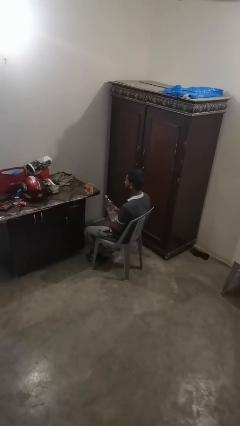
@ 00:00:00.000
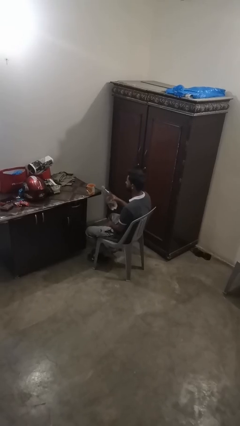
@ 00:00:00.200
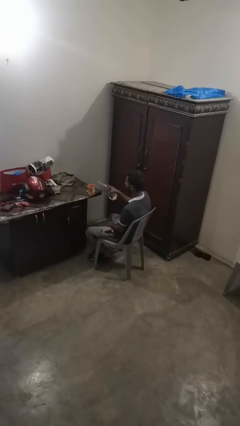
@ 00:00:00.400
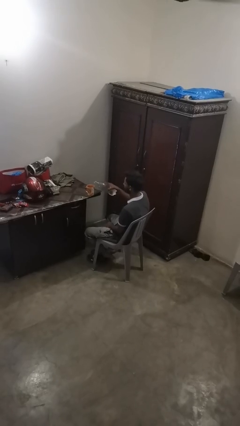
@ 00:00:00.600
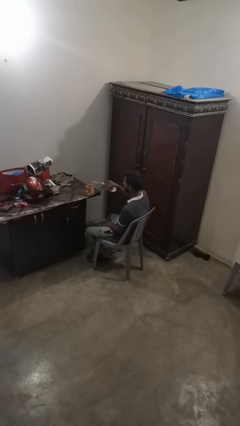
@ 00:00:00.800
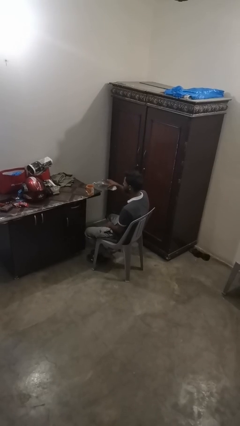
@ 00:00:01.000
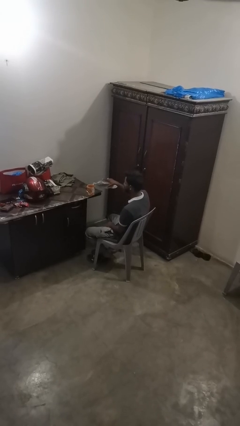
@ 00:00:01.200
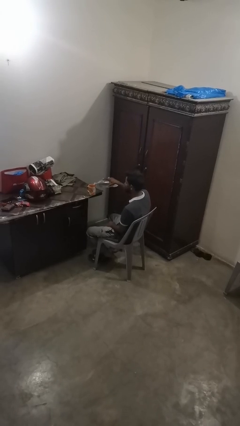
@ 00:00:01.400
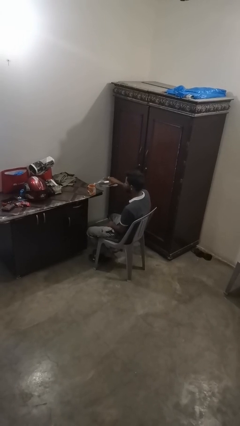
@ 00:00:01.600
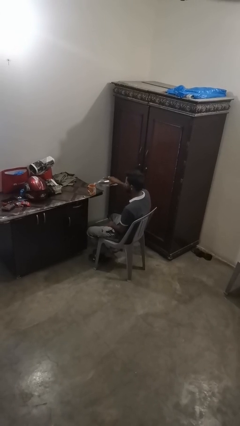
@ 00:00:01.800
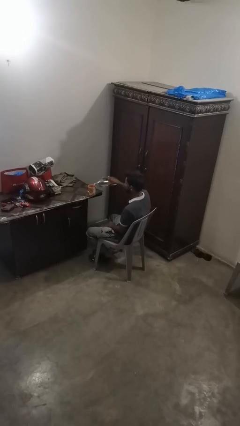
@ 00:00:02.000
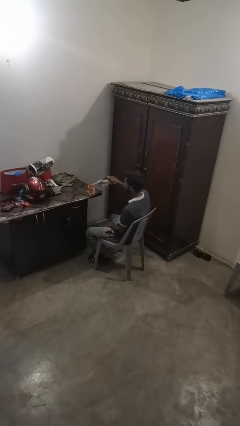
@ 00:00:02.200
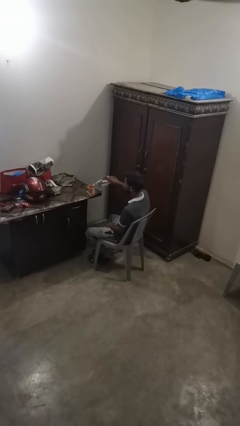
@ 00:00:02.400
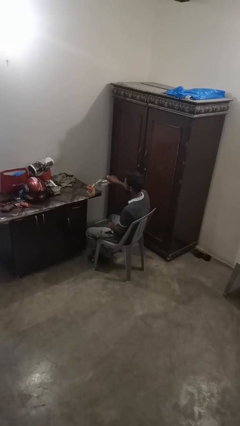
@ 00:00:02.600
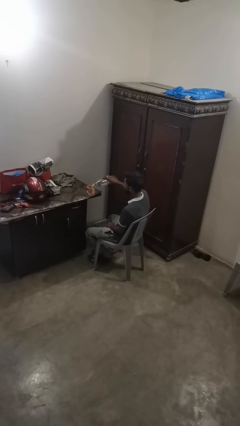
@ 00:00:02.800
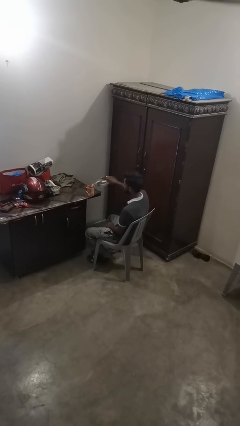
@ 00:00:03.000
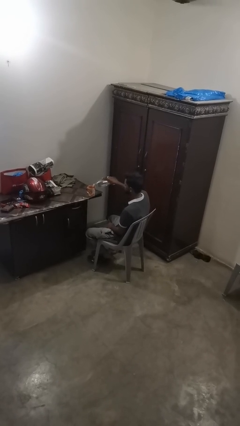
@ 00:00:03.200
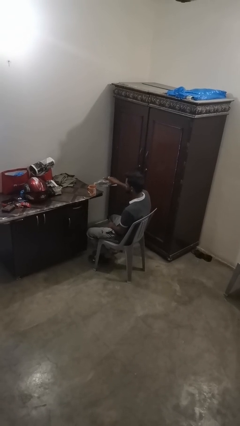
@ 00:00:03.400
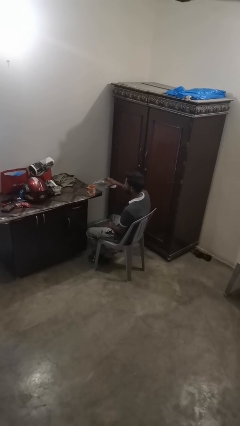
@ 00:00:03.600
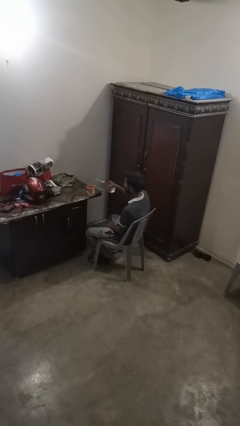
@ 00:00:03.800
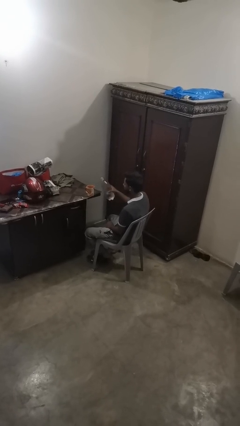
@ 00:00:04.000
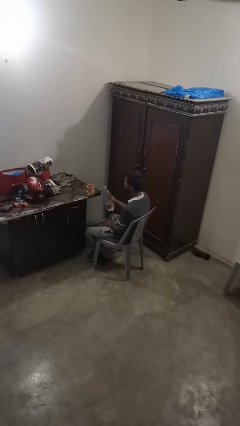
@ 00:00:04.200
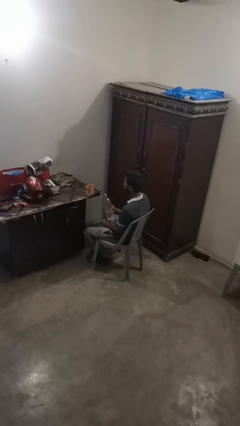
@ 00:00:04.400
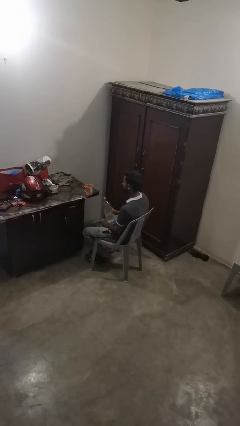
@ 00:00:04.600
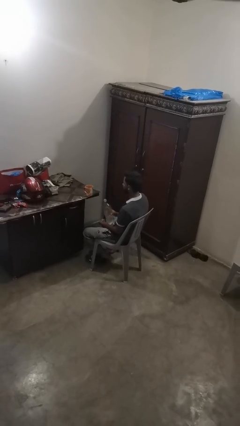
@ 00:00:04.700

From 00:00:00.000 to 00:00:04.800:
person pours liquid into cup

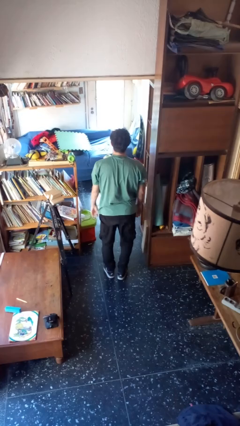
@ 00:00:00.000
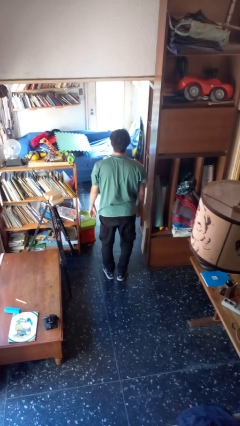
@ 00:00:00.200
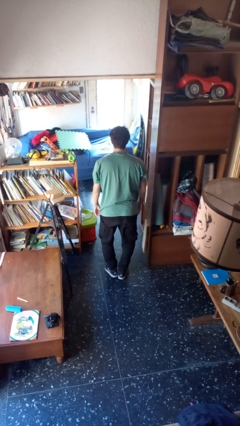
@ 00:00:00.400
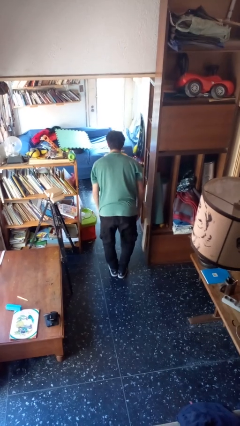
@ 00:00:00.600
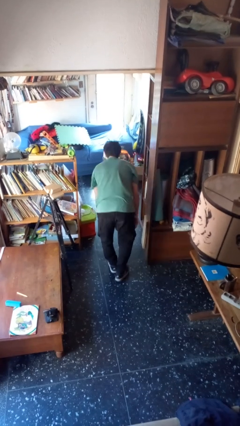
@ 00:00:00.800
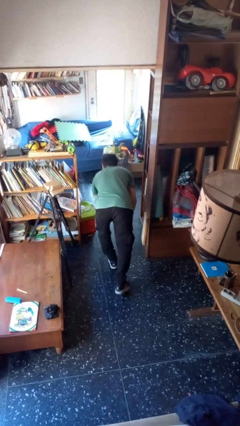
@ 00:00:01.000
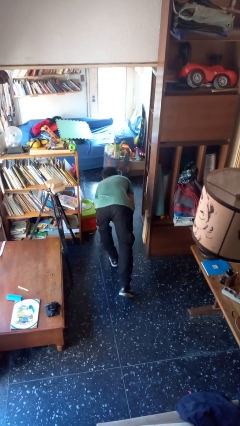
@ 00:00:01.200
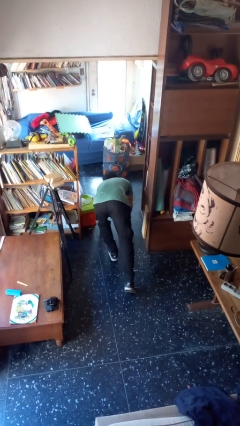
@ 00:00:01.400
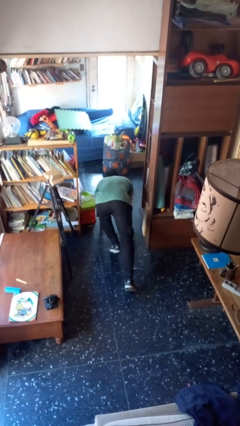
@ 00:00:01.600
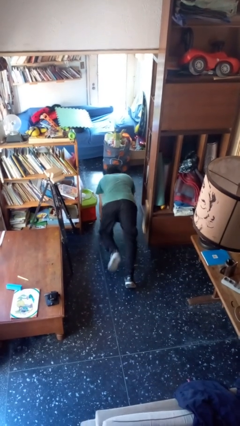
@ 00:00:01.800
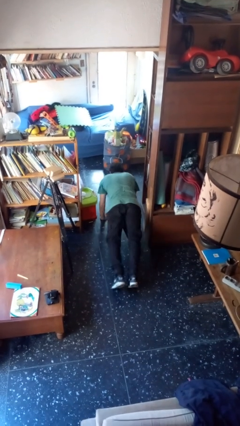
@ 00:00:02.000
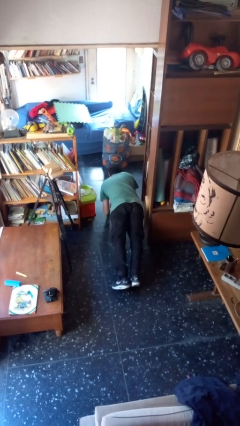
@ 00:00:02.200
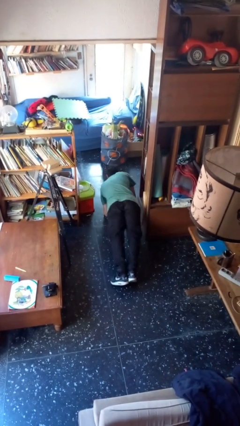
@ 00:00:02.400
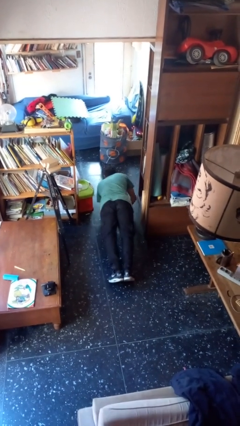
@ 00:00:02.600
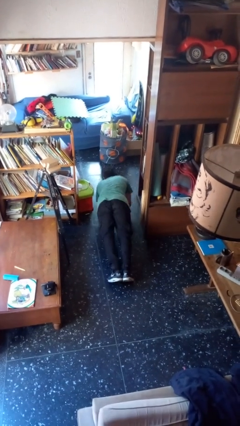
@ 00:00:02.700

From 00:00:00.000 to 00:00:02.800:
person exercises with plank

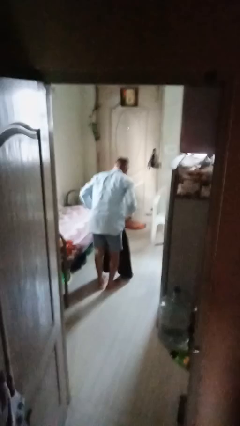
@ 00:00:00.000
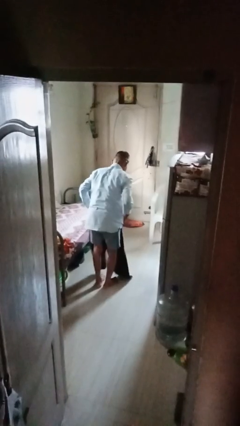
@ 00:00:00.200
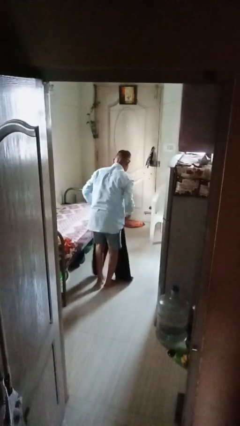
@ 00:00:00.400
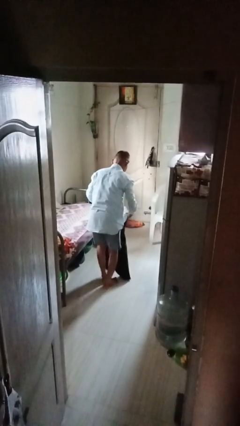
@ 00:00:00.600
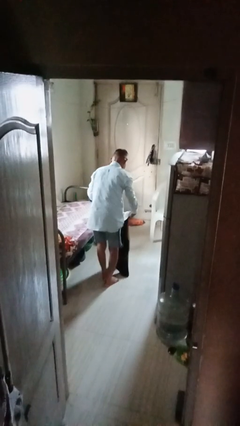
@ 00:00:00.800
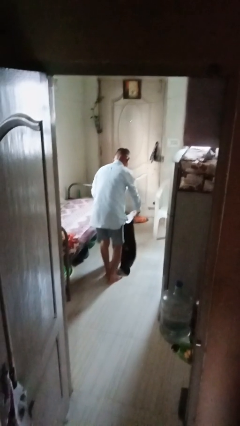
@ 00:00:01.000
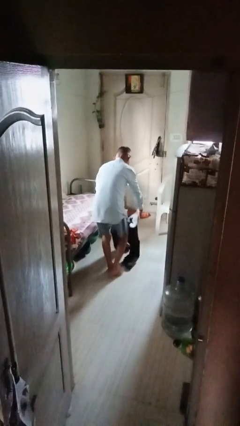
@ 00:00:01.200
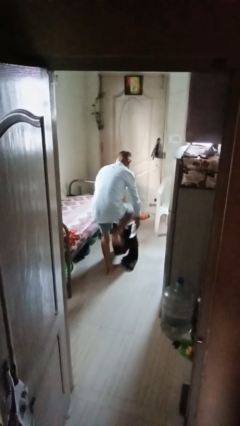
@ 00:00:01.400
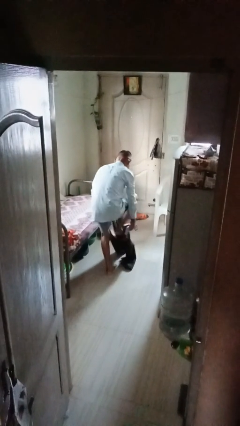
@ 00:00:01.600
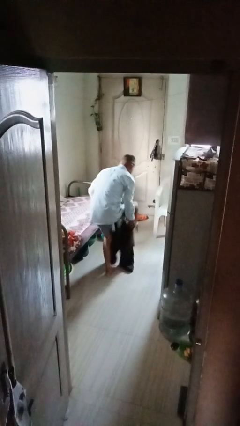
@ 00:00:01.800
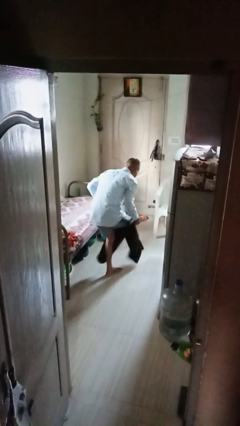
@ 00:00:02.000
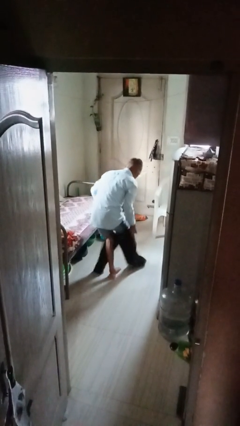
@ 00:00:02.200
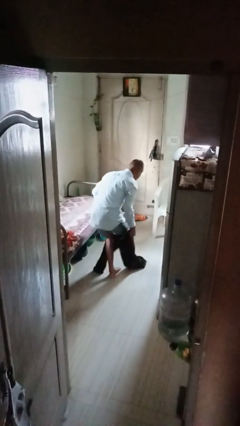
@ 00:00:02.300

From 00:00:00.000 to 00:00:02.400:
person puts on pants

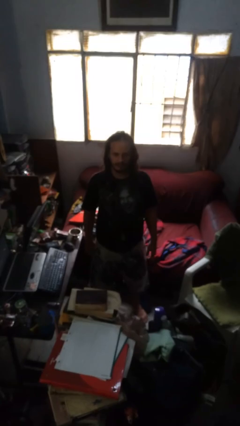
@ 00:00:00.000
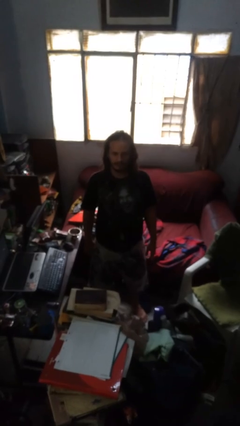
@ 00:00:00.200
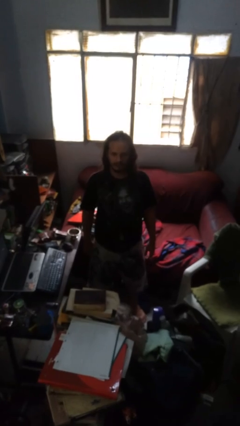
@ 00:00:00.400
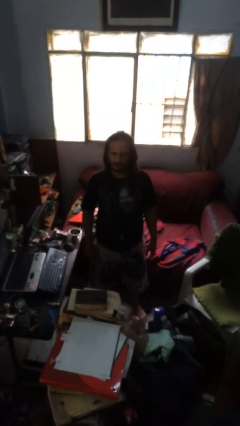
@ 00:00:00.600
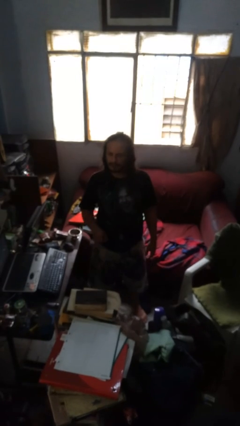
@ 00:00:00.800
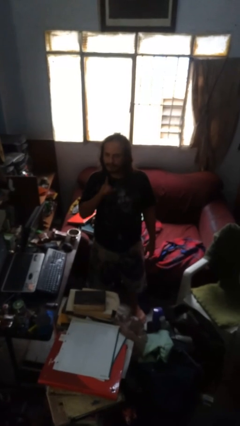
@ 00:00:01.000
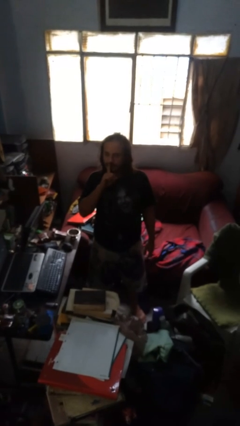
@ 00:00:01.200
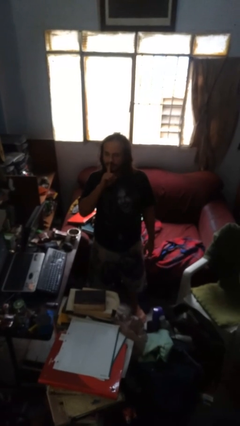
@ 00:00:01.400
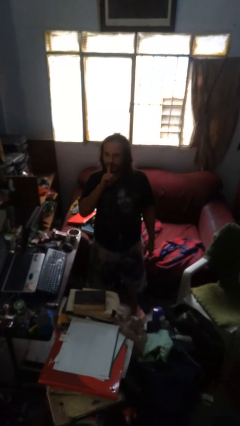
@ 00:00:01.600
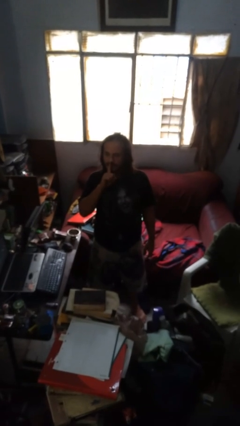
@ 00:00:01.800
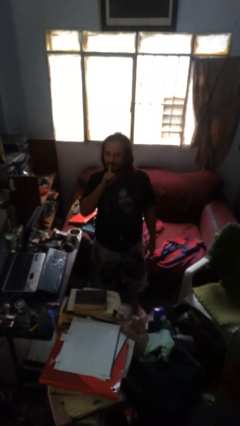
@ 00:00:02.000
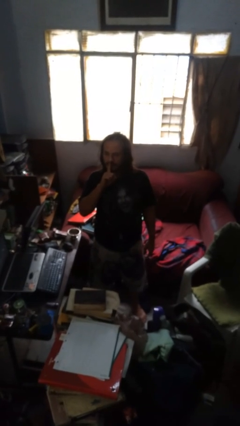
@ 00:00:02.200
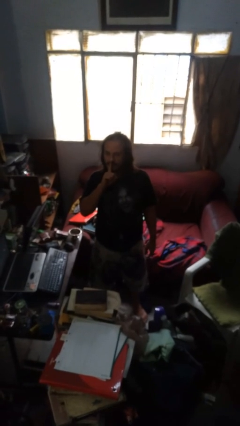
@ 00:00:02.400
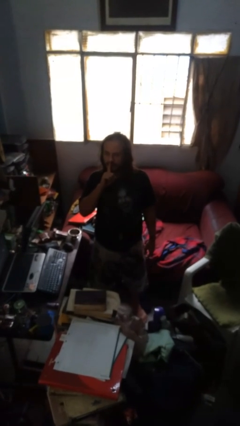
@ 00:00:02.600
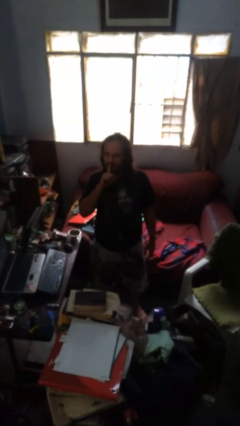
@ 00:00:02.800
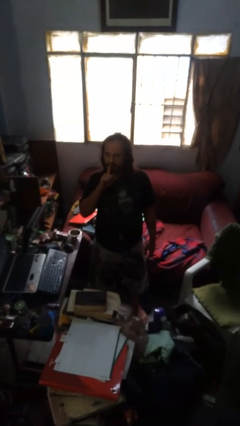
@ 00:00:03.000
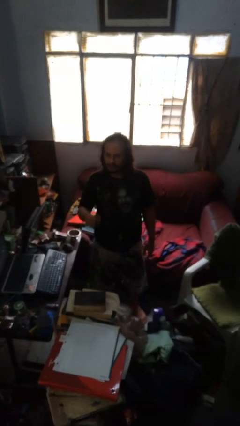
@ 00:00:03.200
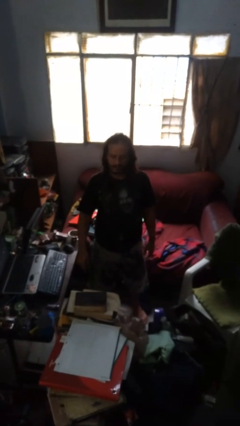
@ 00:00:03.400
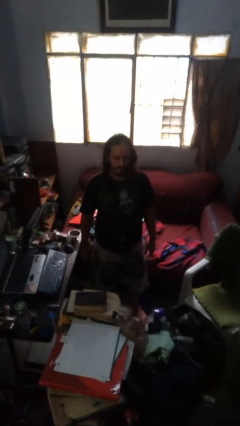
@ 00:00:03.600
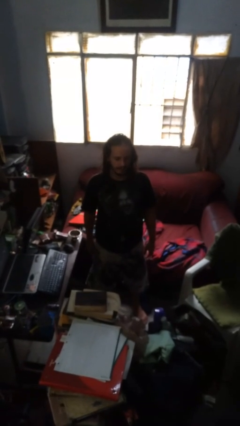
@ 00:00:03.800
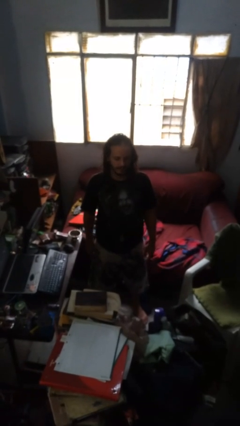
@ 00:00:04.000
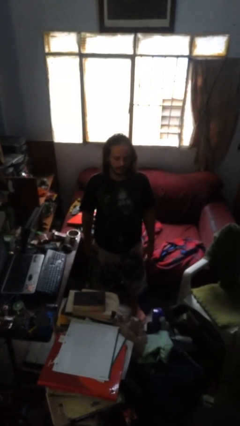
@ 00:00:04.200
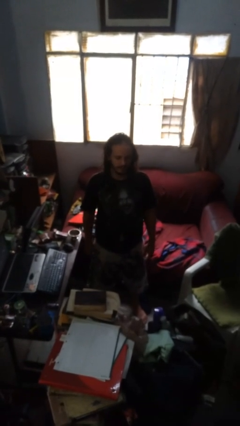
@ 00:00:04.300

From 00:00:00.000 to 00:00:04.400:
person gestures be quiet

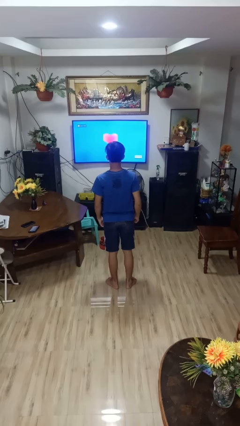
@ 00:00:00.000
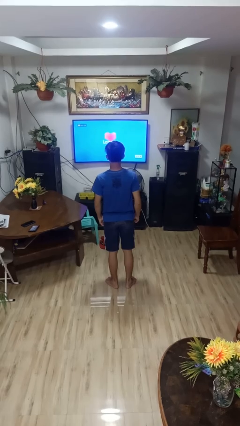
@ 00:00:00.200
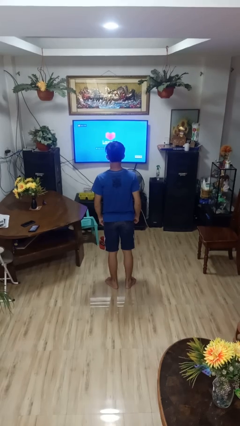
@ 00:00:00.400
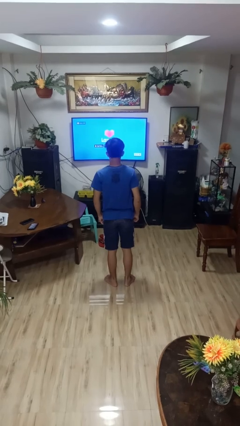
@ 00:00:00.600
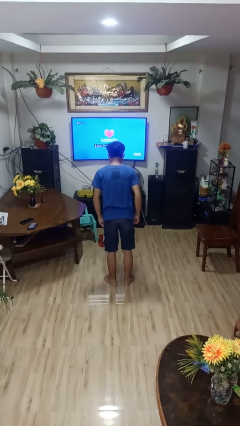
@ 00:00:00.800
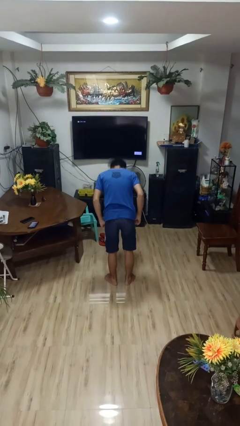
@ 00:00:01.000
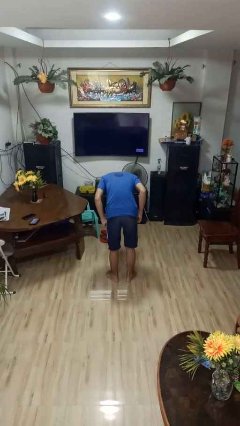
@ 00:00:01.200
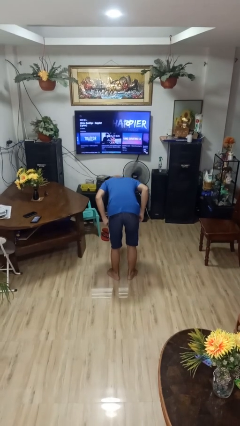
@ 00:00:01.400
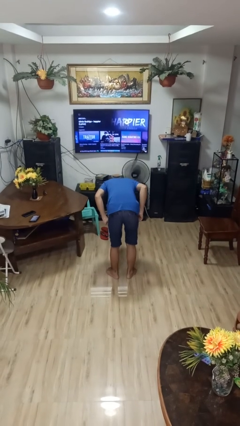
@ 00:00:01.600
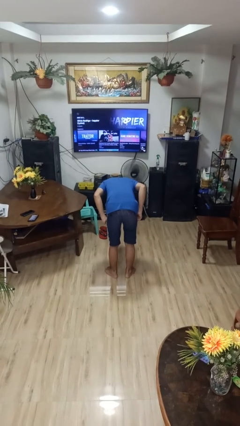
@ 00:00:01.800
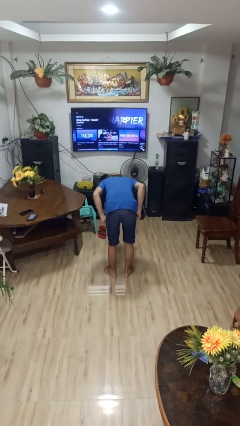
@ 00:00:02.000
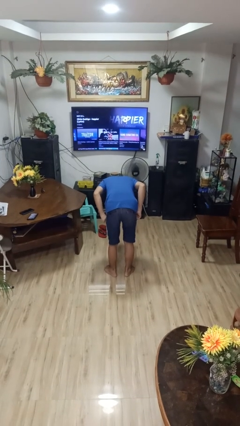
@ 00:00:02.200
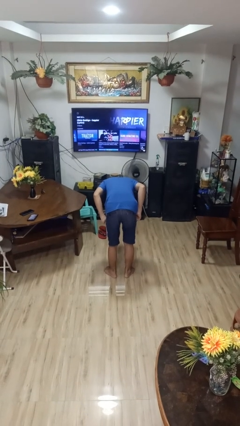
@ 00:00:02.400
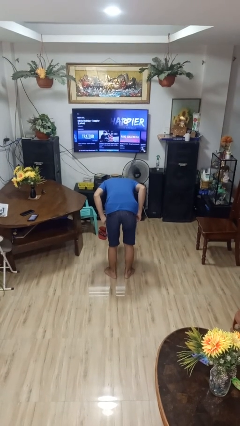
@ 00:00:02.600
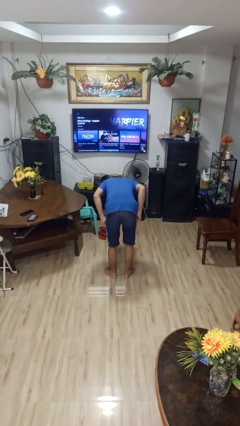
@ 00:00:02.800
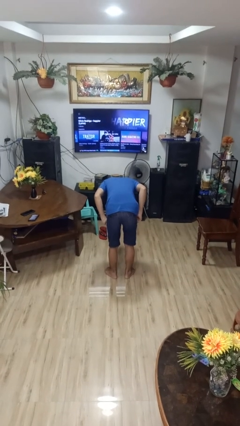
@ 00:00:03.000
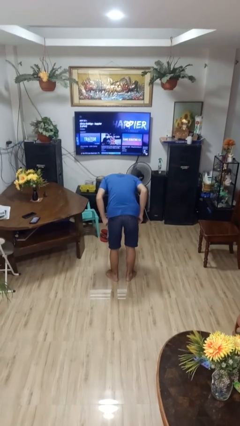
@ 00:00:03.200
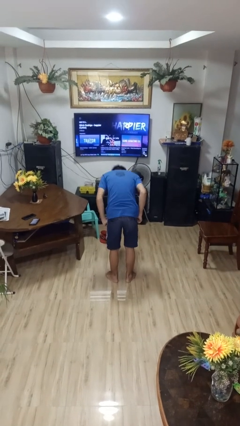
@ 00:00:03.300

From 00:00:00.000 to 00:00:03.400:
person bows
